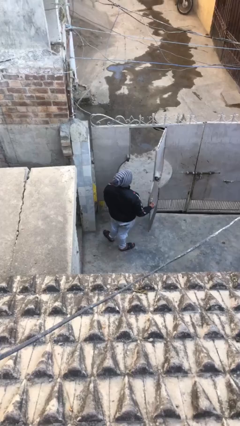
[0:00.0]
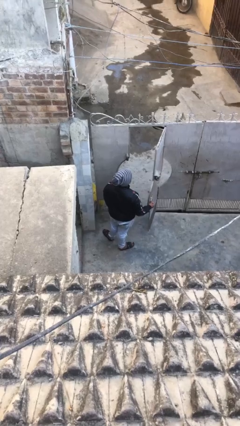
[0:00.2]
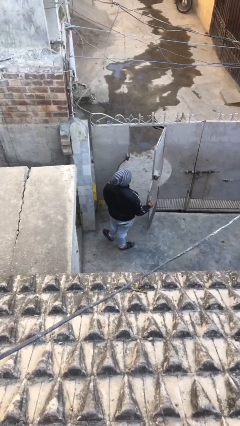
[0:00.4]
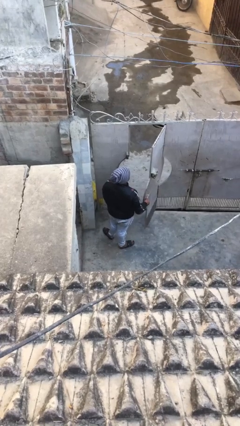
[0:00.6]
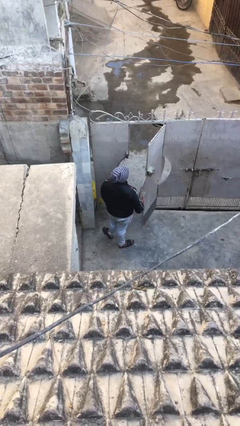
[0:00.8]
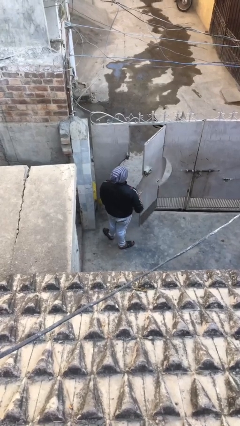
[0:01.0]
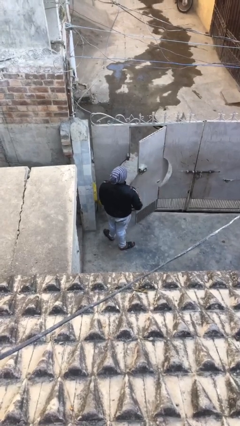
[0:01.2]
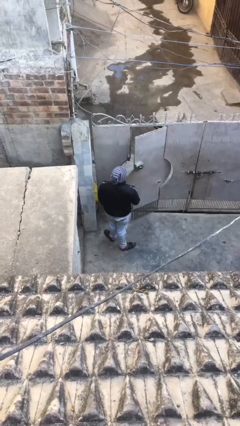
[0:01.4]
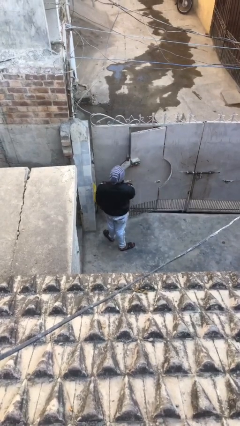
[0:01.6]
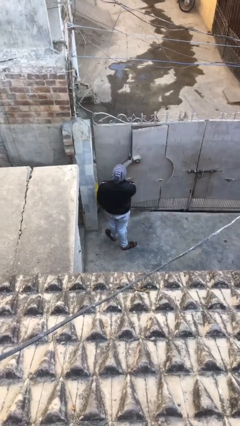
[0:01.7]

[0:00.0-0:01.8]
person closes facility door

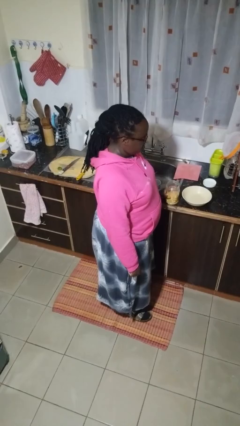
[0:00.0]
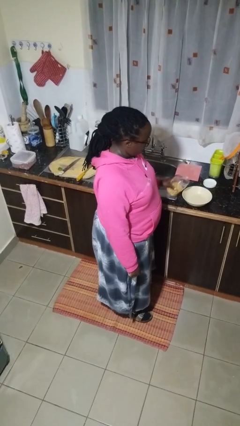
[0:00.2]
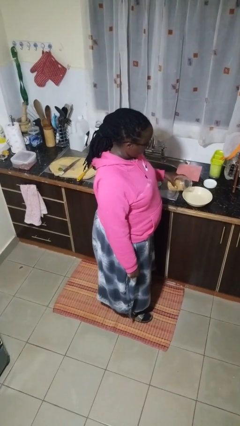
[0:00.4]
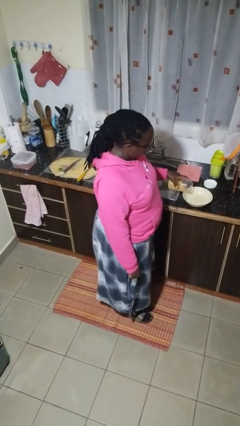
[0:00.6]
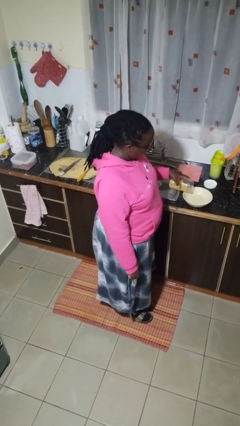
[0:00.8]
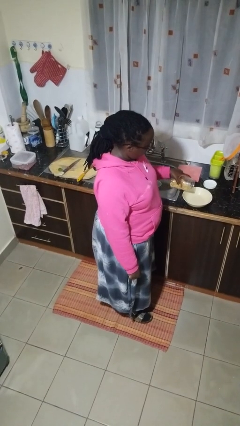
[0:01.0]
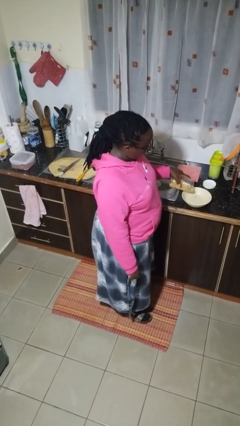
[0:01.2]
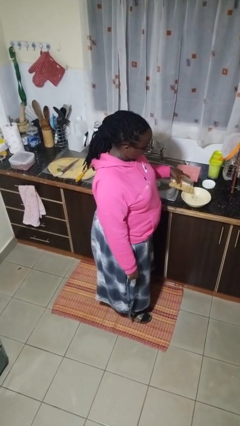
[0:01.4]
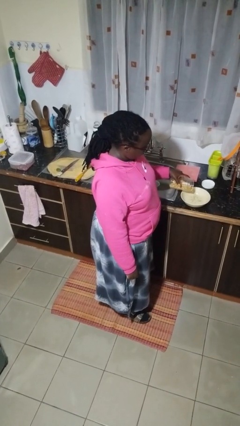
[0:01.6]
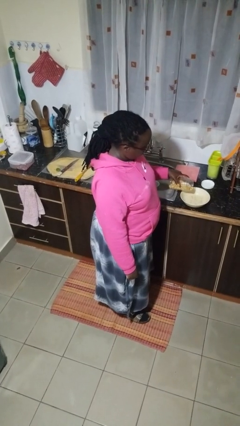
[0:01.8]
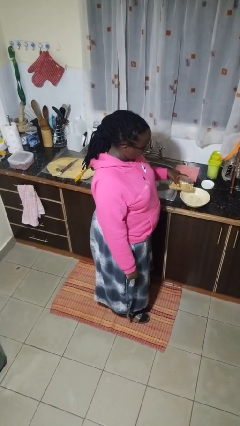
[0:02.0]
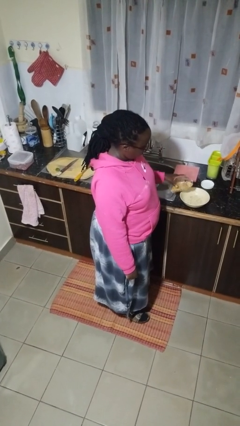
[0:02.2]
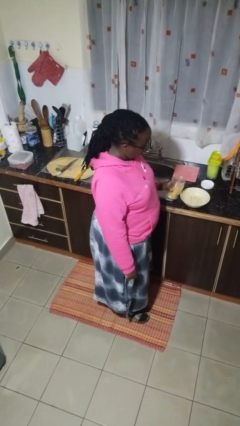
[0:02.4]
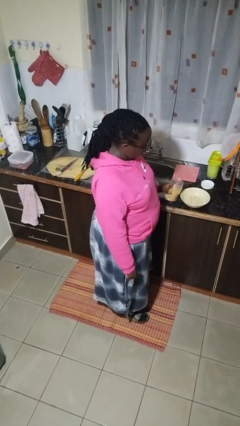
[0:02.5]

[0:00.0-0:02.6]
person pours into bowl

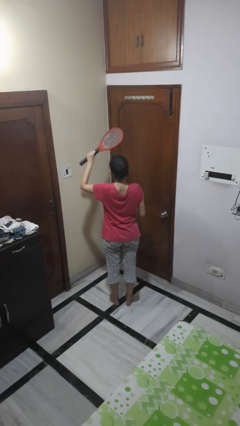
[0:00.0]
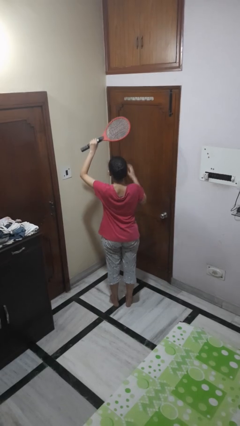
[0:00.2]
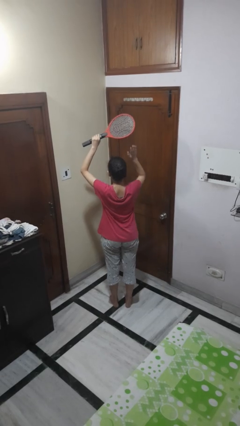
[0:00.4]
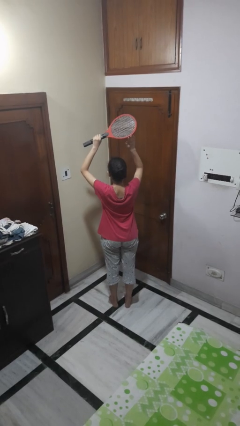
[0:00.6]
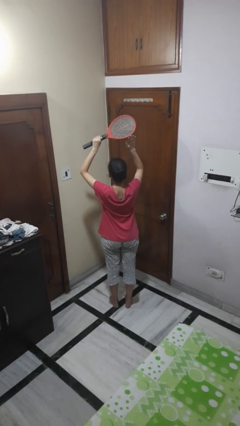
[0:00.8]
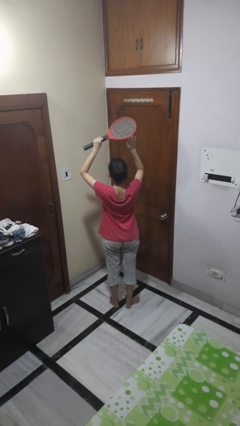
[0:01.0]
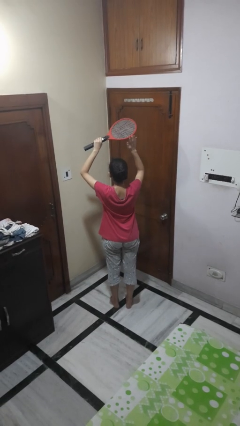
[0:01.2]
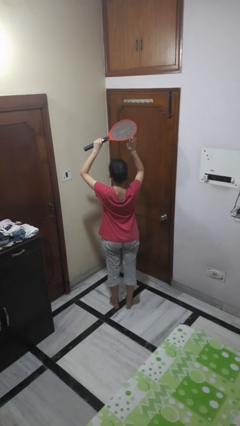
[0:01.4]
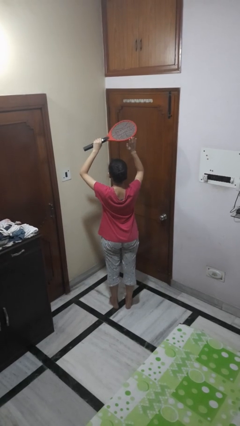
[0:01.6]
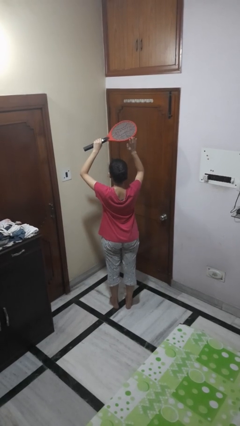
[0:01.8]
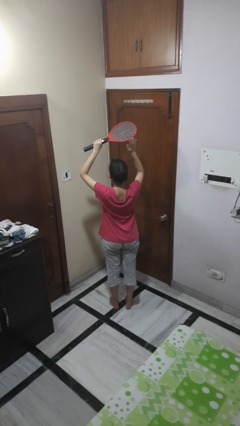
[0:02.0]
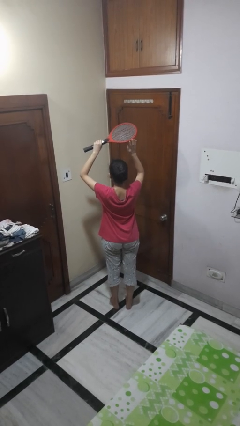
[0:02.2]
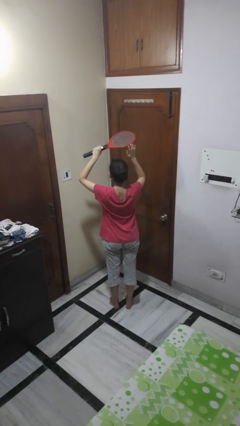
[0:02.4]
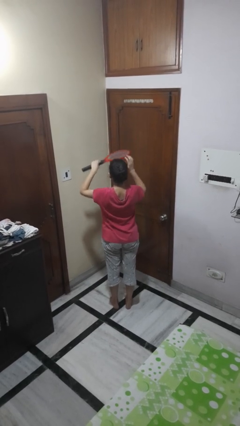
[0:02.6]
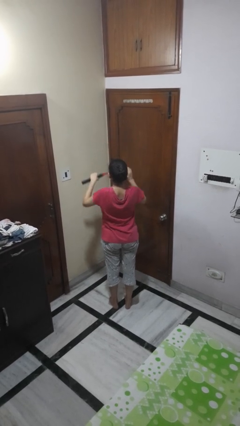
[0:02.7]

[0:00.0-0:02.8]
person holds object above head

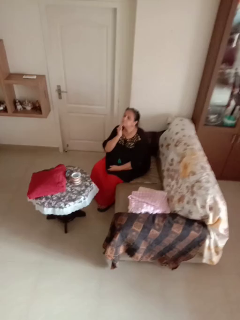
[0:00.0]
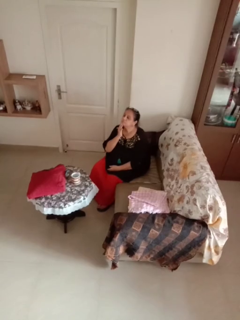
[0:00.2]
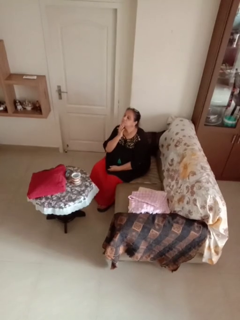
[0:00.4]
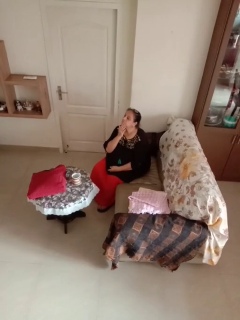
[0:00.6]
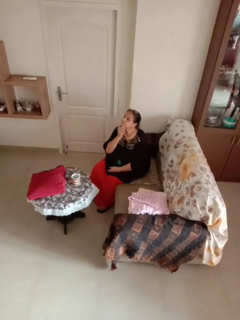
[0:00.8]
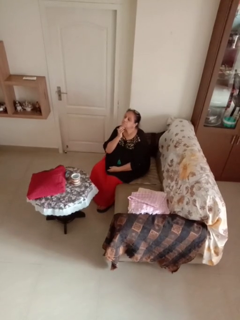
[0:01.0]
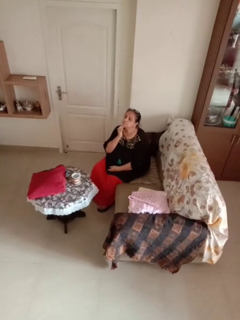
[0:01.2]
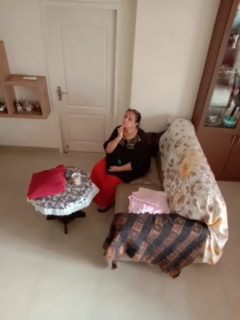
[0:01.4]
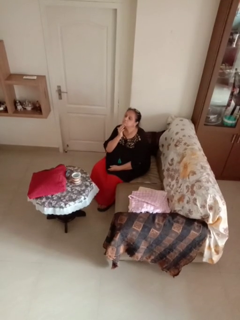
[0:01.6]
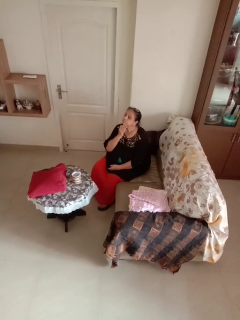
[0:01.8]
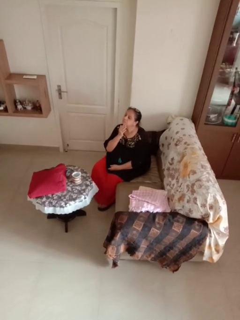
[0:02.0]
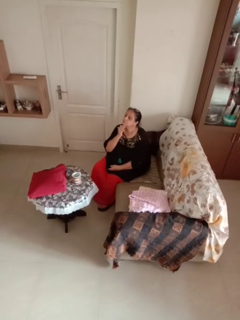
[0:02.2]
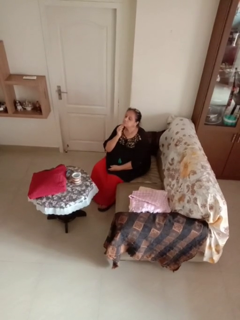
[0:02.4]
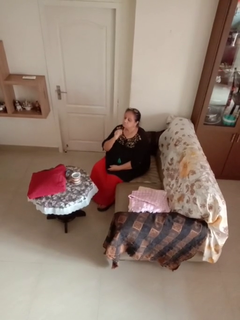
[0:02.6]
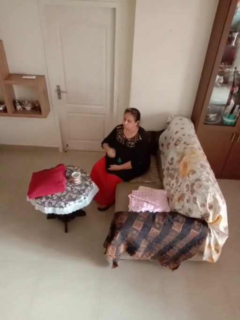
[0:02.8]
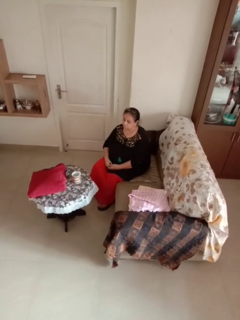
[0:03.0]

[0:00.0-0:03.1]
person strokes chin

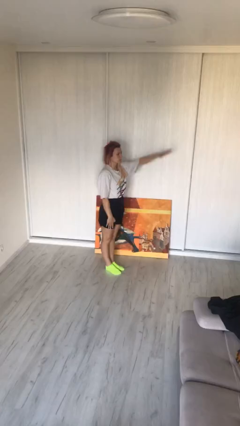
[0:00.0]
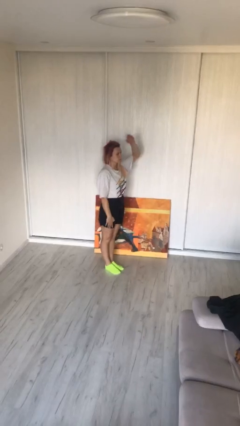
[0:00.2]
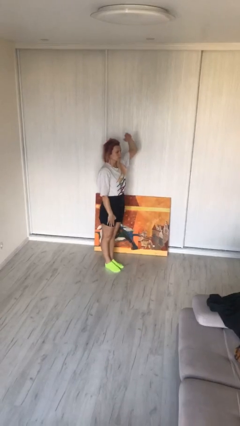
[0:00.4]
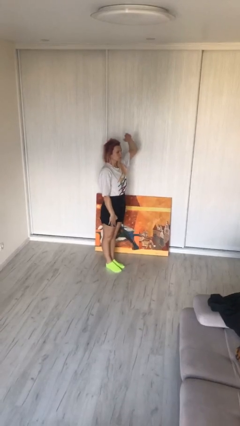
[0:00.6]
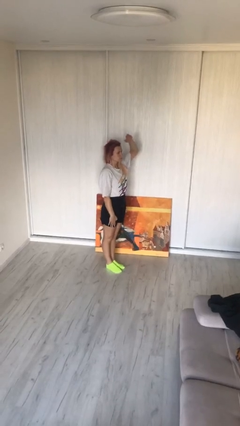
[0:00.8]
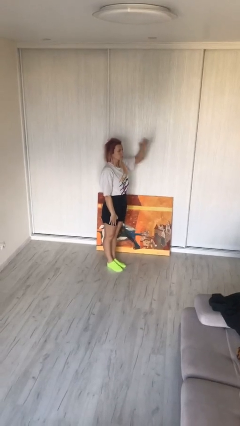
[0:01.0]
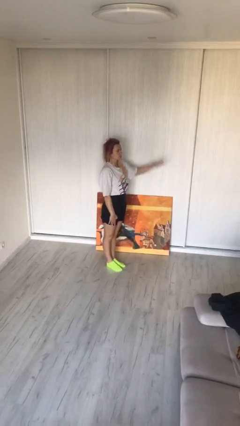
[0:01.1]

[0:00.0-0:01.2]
person salutes

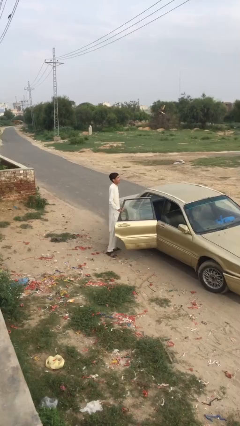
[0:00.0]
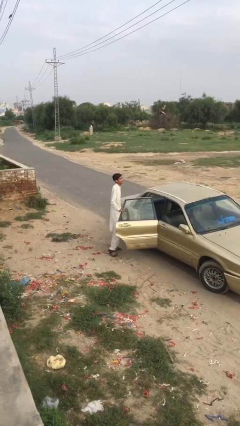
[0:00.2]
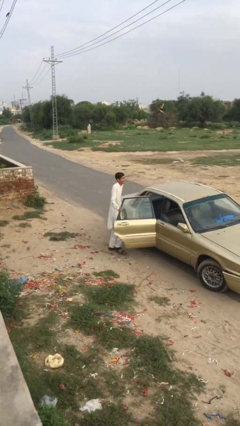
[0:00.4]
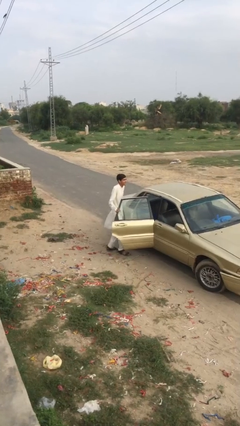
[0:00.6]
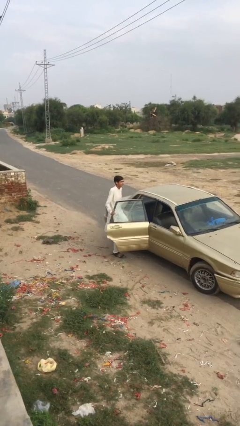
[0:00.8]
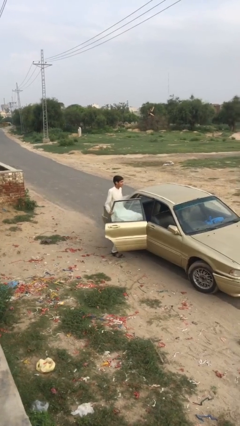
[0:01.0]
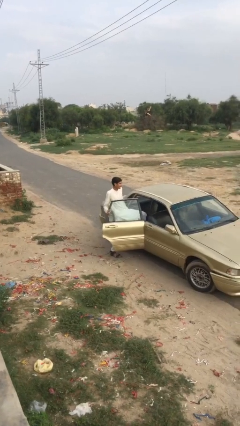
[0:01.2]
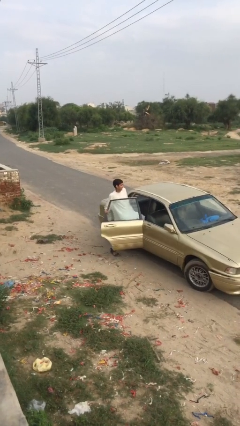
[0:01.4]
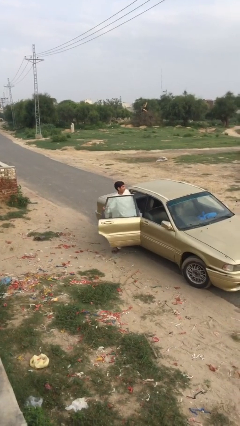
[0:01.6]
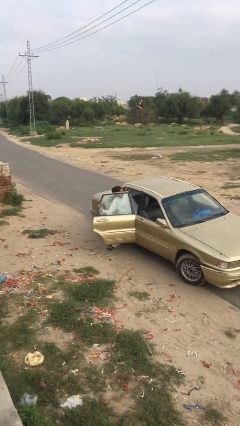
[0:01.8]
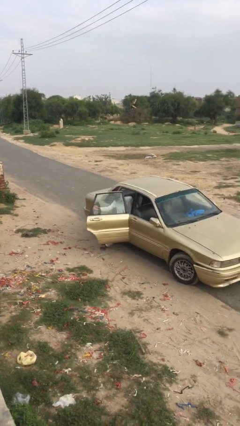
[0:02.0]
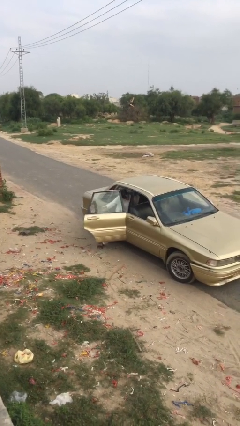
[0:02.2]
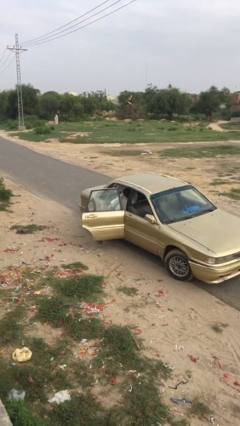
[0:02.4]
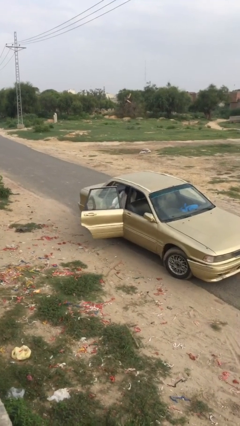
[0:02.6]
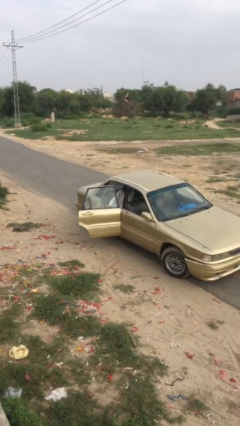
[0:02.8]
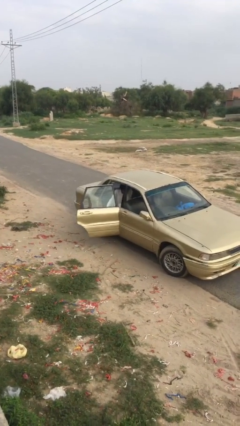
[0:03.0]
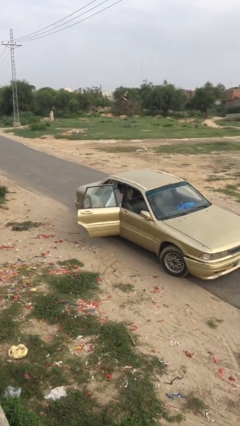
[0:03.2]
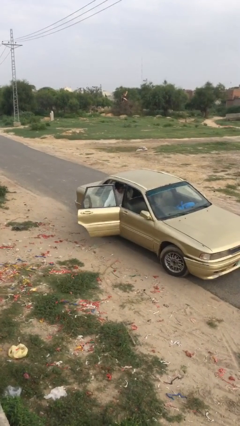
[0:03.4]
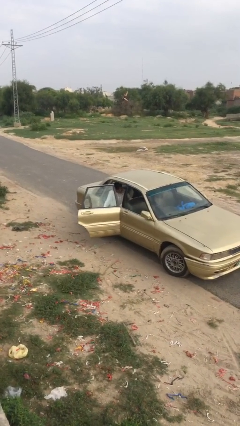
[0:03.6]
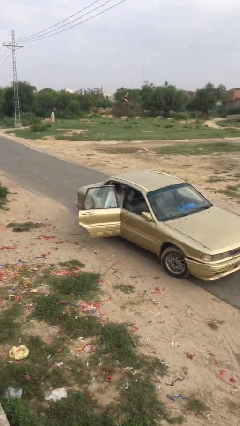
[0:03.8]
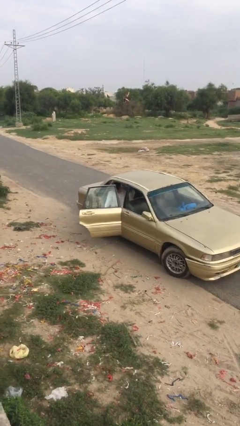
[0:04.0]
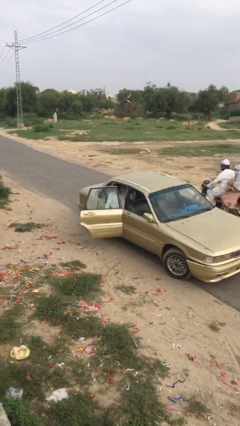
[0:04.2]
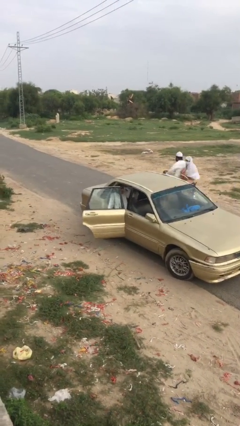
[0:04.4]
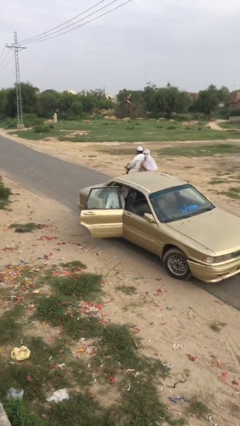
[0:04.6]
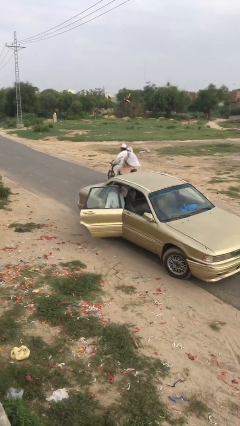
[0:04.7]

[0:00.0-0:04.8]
person enters car

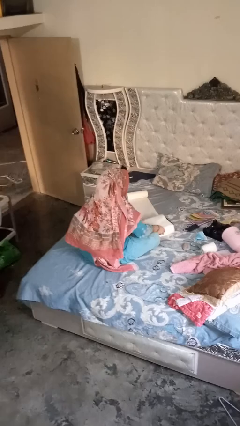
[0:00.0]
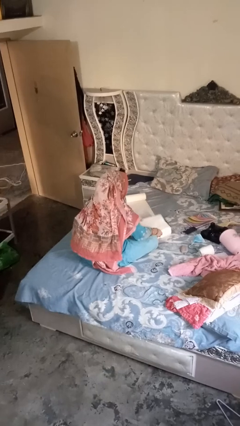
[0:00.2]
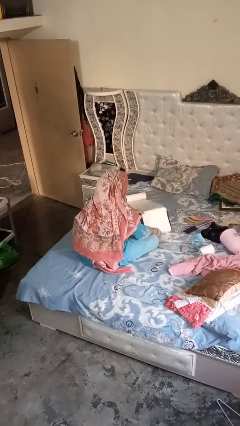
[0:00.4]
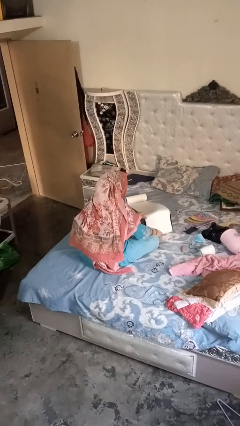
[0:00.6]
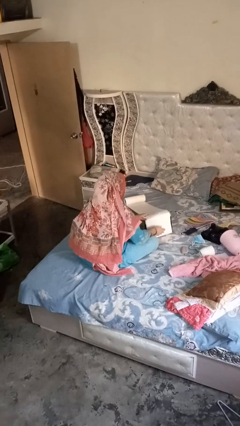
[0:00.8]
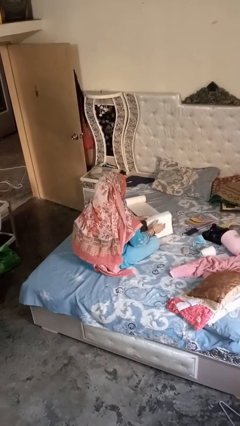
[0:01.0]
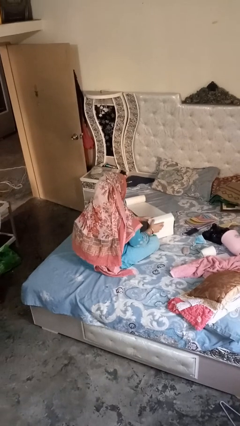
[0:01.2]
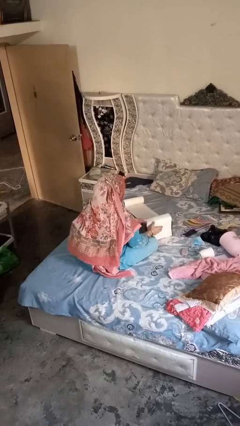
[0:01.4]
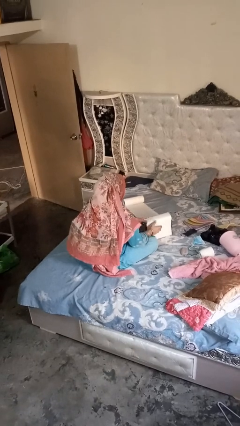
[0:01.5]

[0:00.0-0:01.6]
person wraps box
